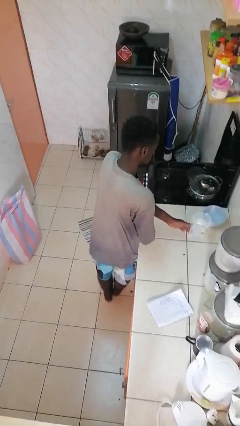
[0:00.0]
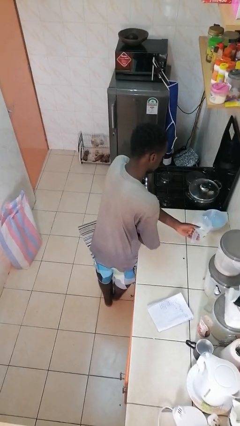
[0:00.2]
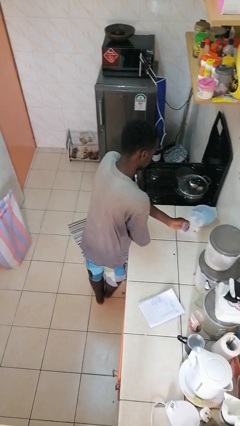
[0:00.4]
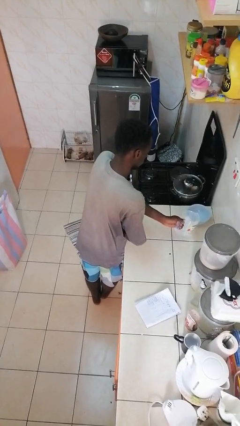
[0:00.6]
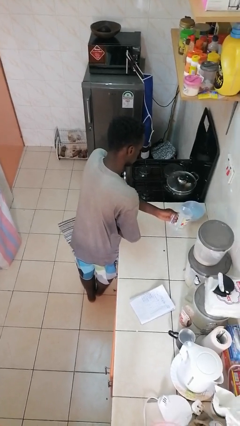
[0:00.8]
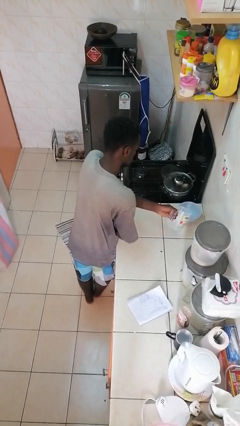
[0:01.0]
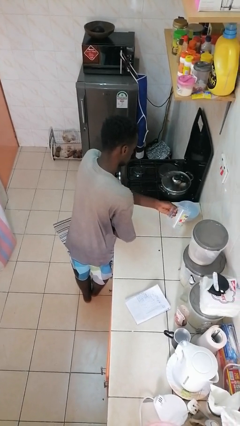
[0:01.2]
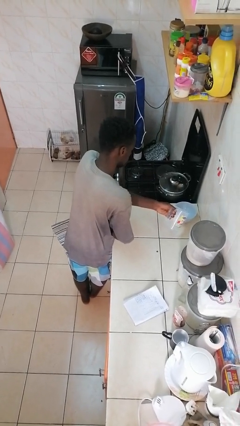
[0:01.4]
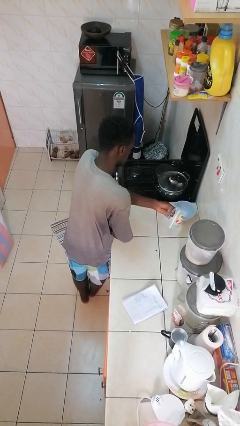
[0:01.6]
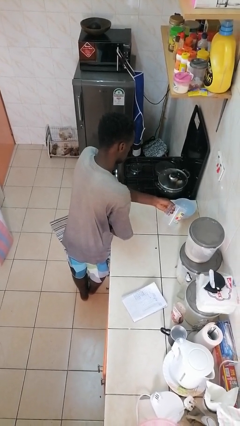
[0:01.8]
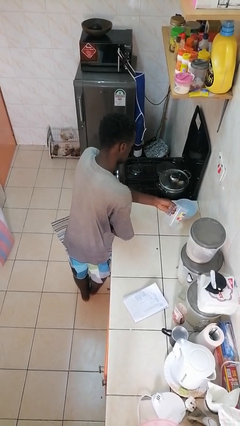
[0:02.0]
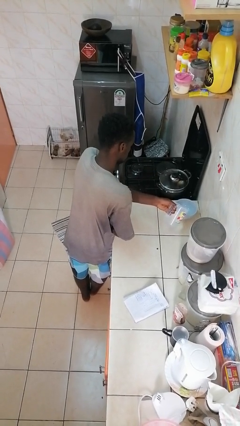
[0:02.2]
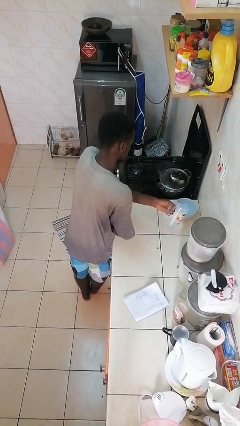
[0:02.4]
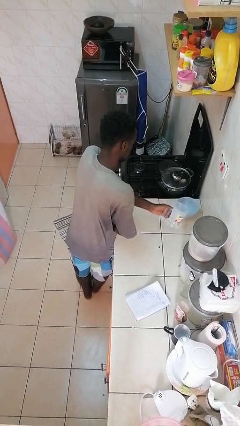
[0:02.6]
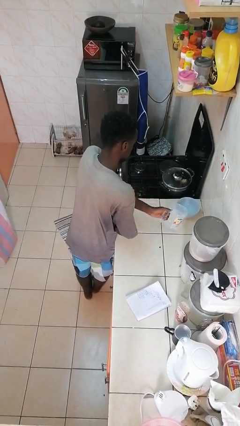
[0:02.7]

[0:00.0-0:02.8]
person pours into bowl

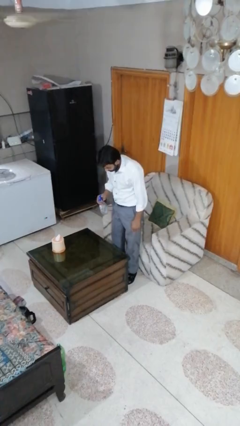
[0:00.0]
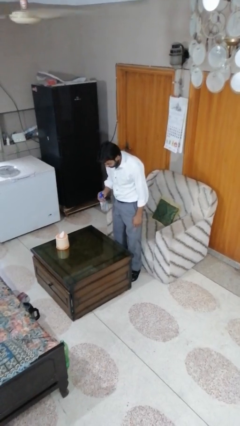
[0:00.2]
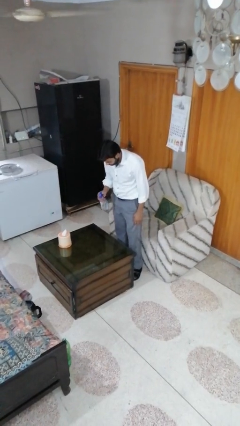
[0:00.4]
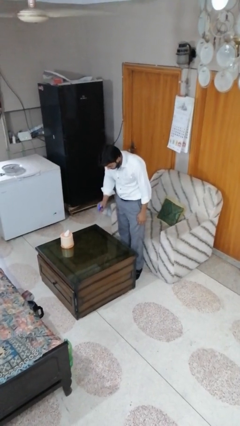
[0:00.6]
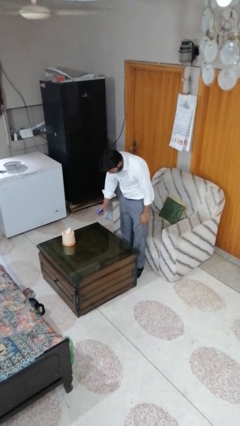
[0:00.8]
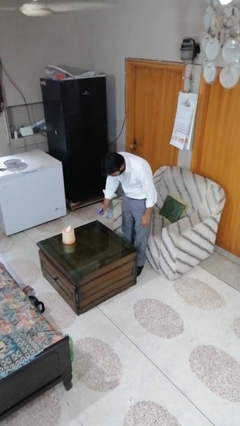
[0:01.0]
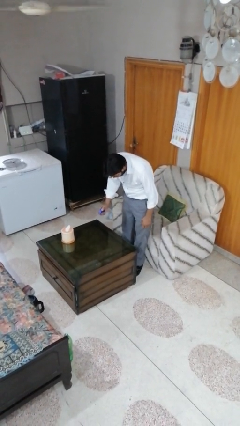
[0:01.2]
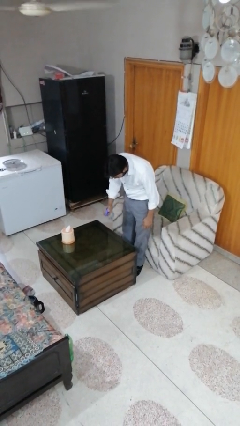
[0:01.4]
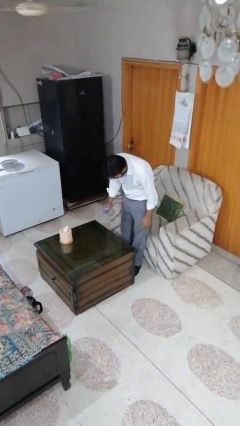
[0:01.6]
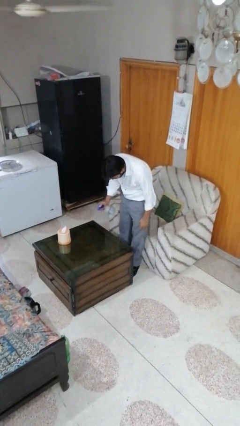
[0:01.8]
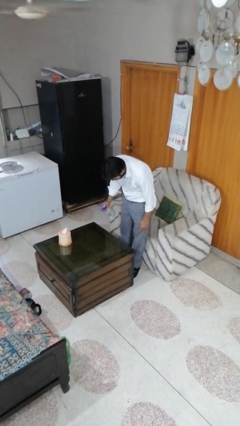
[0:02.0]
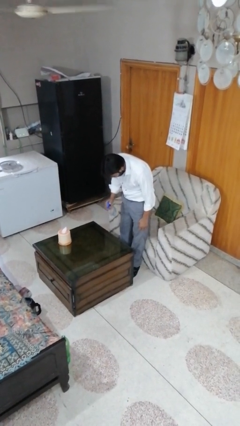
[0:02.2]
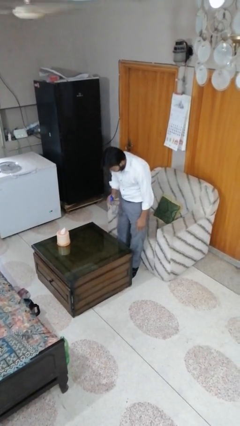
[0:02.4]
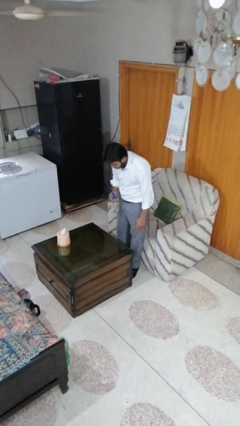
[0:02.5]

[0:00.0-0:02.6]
person sprays from bottle

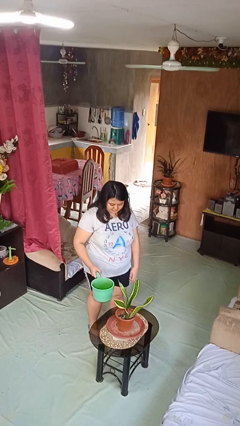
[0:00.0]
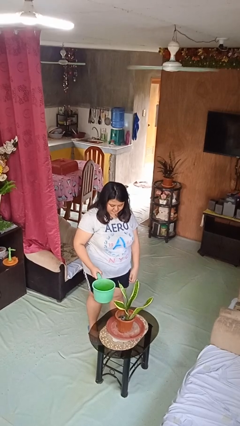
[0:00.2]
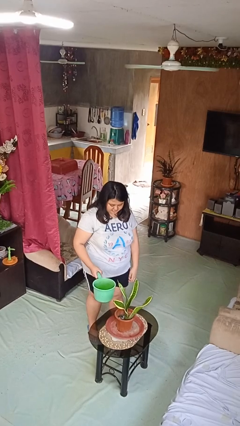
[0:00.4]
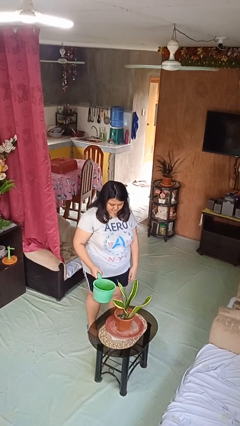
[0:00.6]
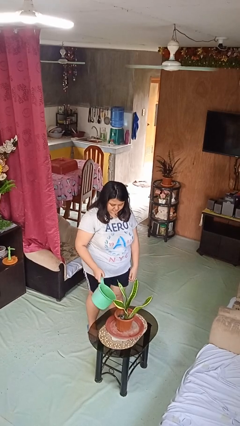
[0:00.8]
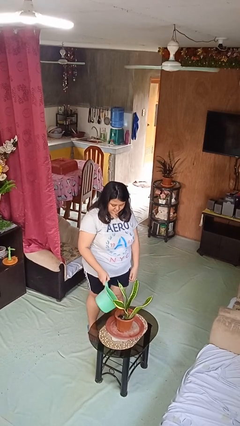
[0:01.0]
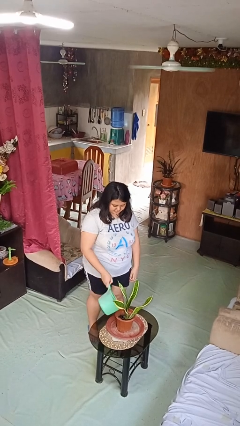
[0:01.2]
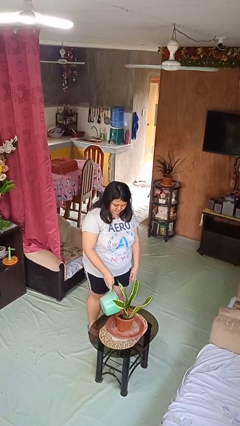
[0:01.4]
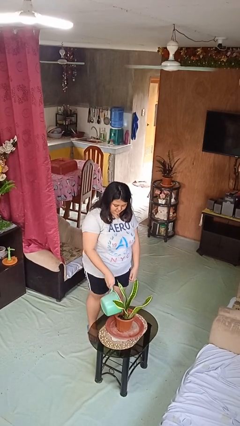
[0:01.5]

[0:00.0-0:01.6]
person waters houseplant

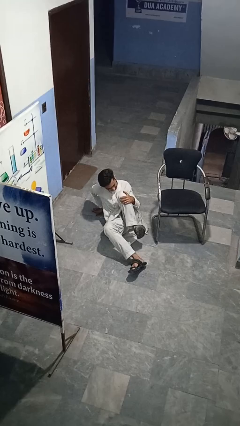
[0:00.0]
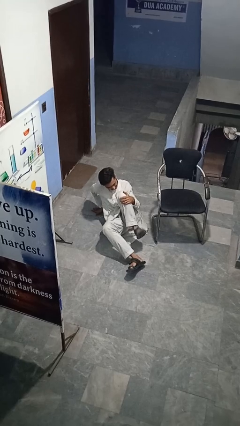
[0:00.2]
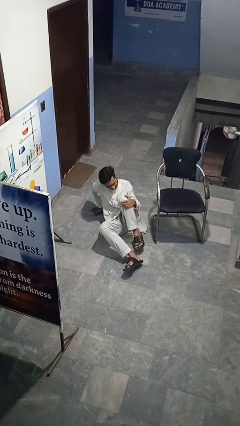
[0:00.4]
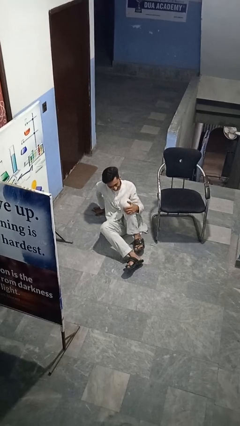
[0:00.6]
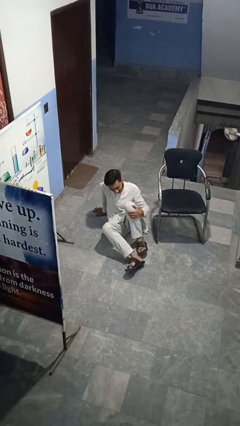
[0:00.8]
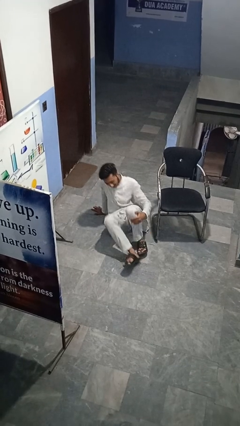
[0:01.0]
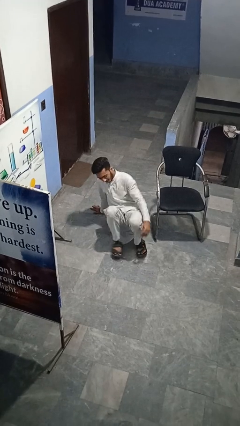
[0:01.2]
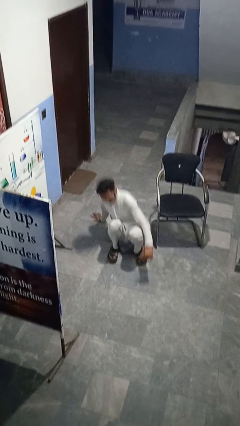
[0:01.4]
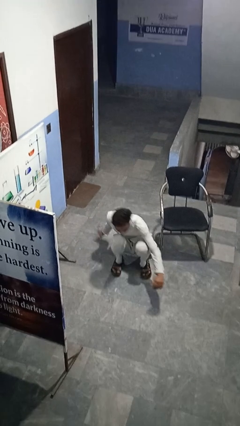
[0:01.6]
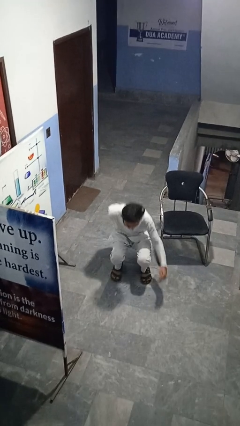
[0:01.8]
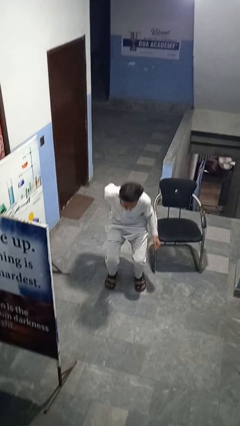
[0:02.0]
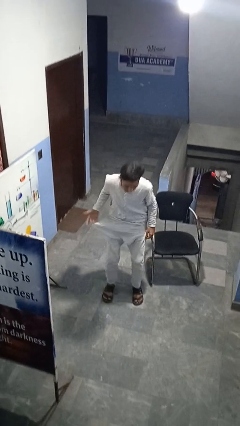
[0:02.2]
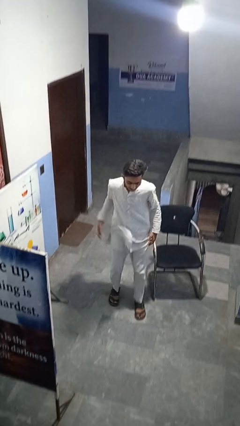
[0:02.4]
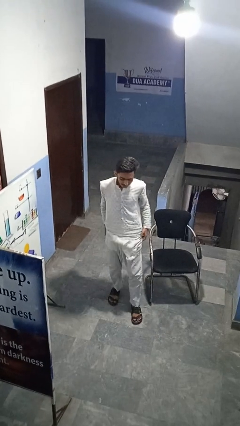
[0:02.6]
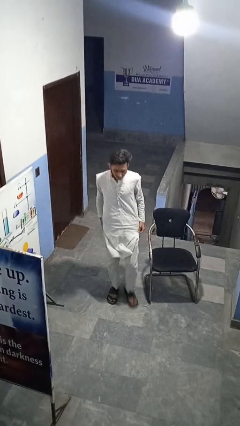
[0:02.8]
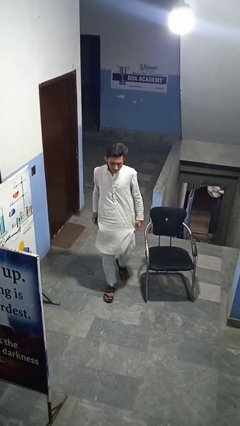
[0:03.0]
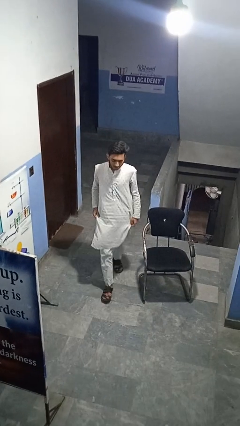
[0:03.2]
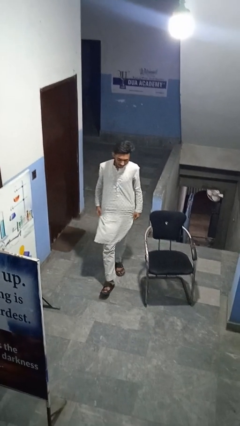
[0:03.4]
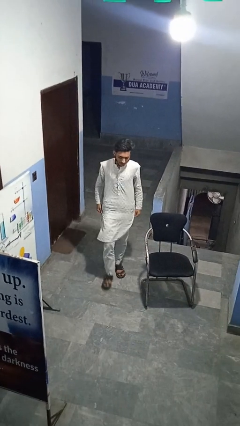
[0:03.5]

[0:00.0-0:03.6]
person stands up from floor

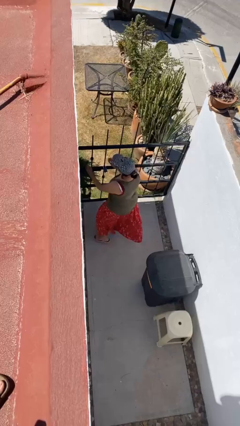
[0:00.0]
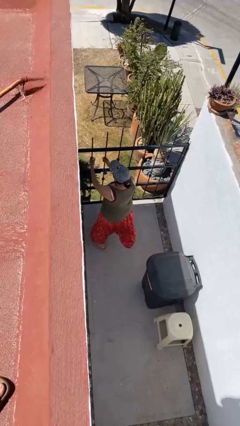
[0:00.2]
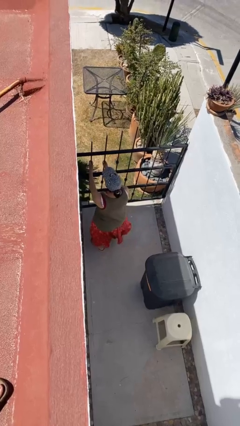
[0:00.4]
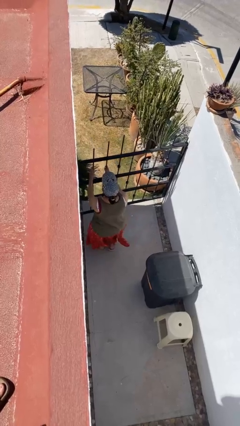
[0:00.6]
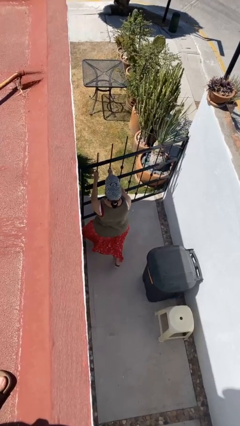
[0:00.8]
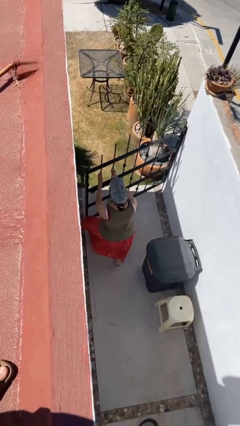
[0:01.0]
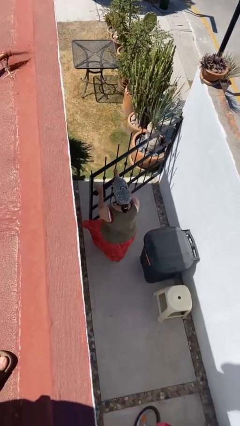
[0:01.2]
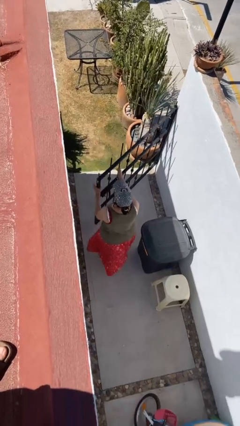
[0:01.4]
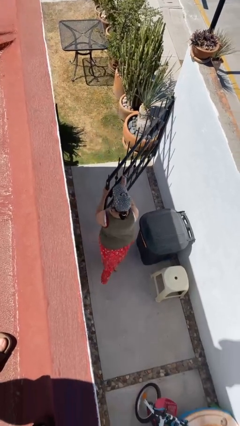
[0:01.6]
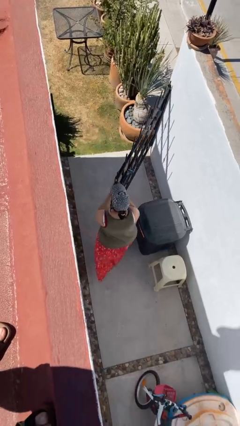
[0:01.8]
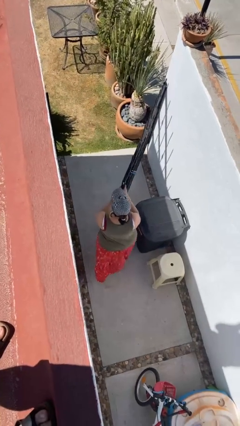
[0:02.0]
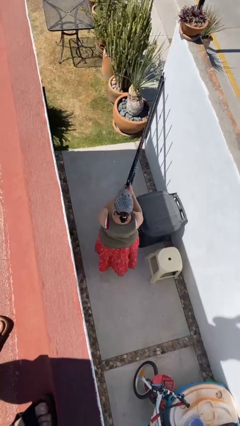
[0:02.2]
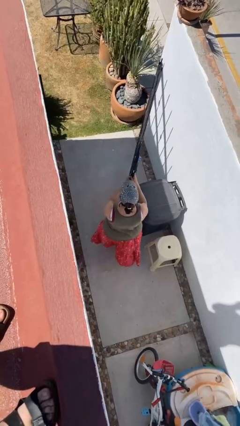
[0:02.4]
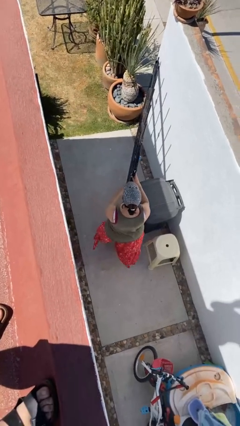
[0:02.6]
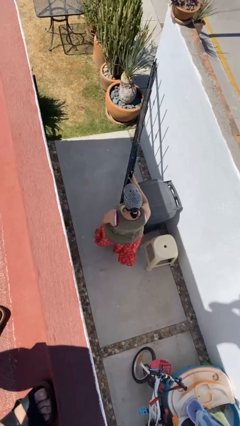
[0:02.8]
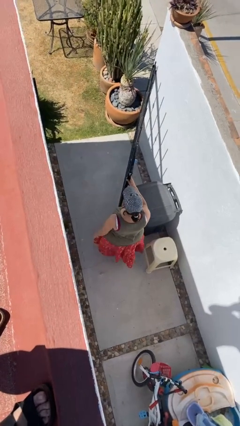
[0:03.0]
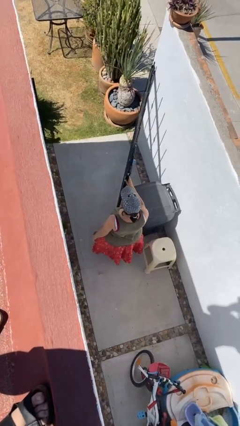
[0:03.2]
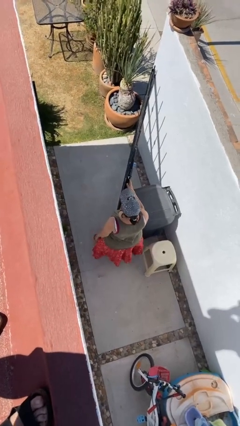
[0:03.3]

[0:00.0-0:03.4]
person opens facility door

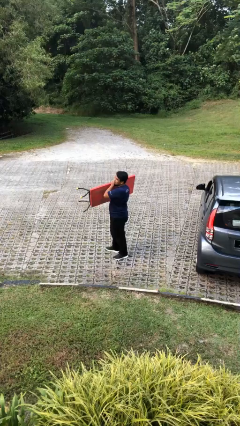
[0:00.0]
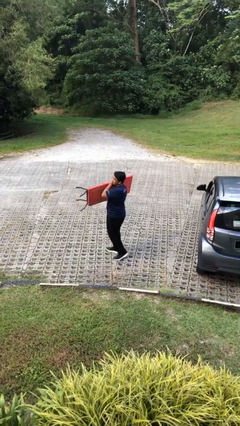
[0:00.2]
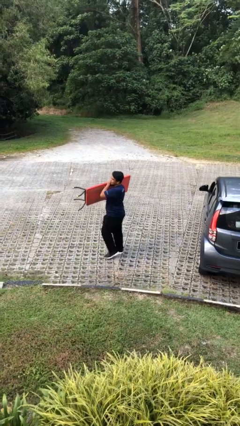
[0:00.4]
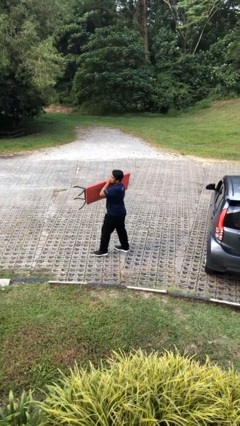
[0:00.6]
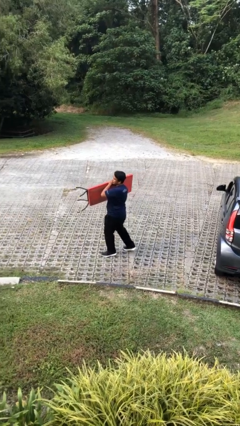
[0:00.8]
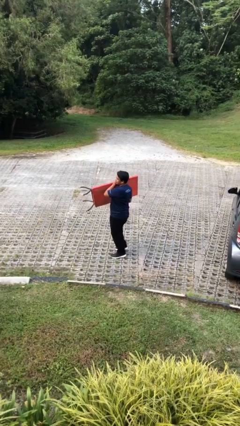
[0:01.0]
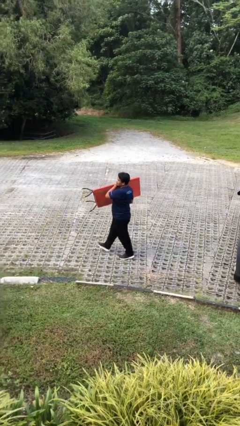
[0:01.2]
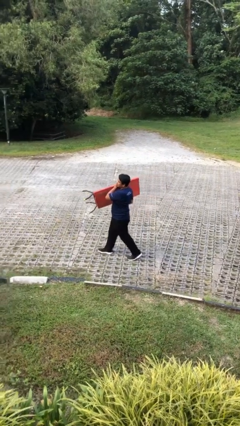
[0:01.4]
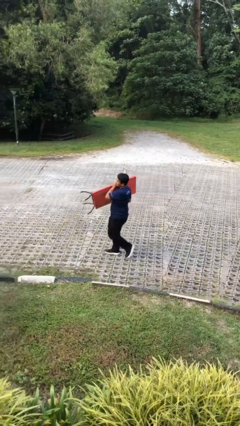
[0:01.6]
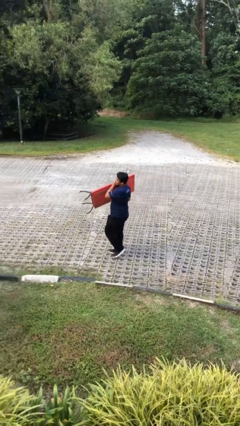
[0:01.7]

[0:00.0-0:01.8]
person carries heavy object

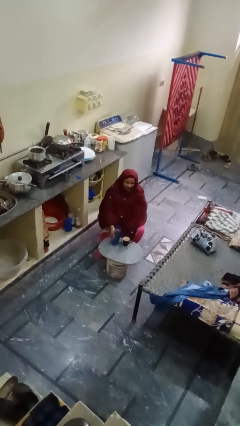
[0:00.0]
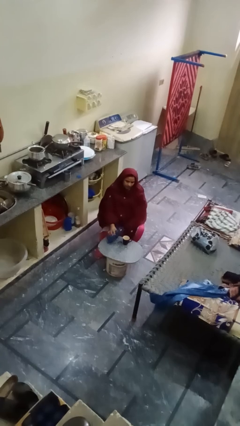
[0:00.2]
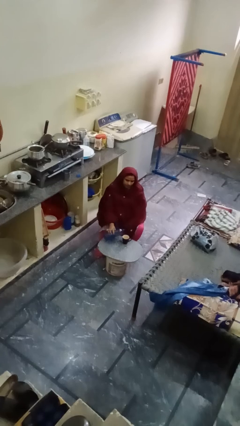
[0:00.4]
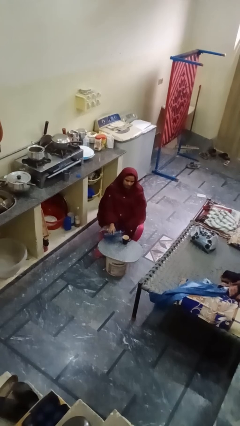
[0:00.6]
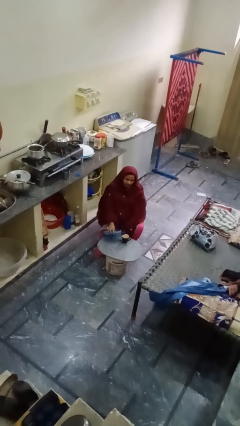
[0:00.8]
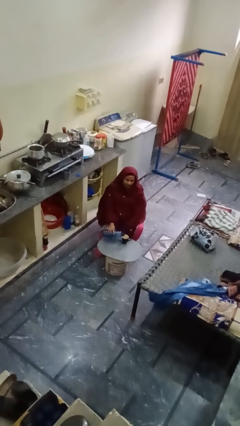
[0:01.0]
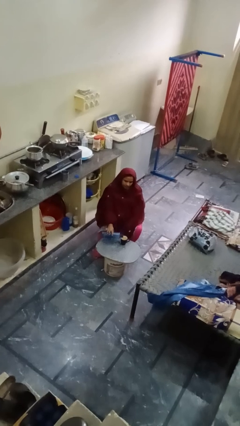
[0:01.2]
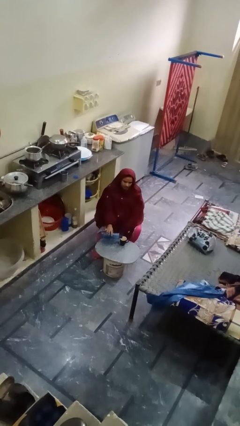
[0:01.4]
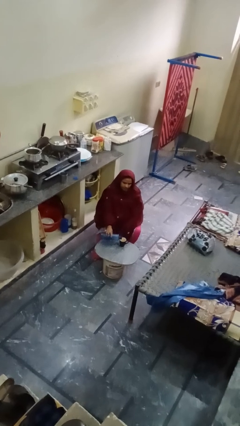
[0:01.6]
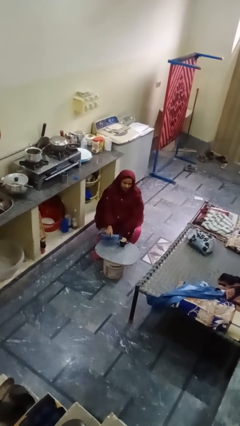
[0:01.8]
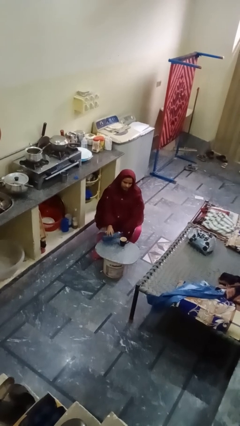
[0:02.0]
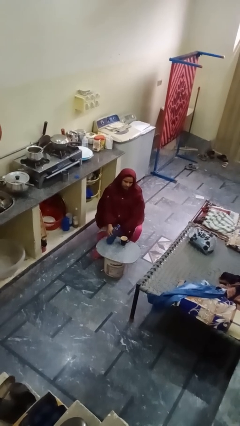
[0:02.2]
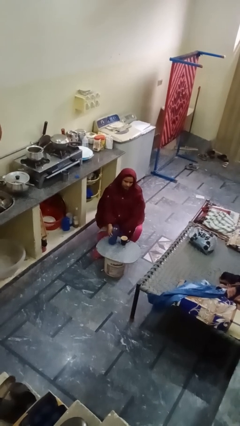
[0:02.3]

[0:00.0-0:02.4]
person pours liquid into cup
